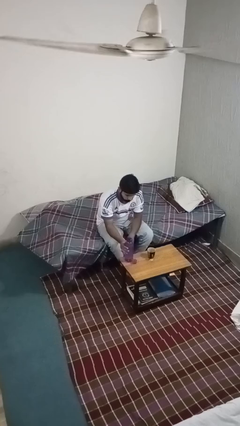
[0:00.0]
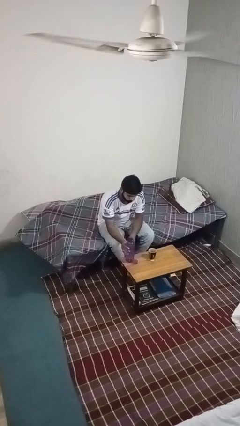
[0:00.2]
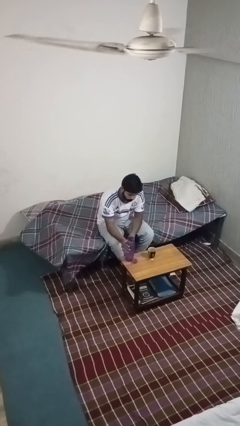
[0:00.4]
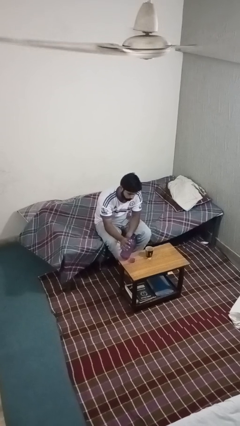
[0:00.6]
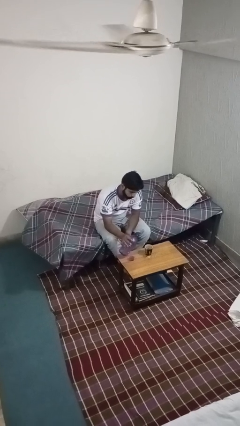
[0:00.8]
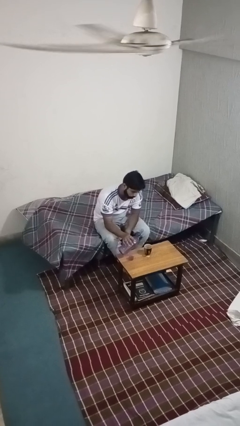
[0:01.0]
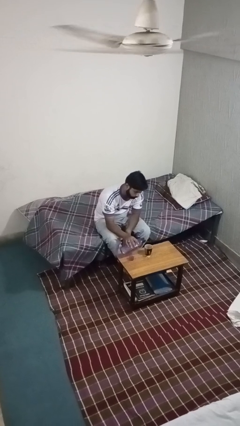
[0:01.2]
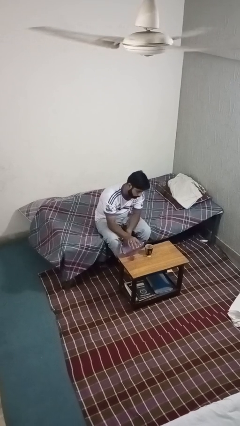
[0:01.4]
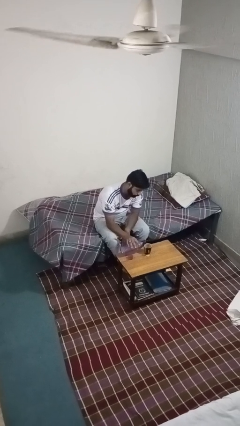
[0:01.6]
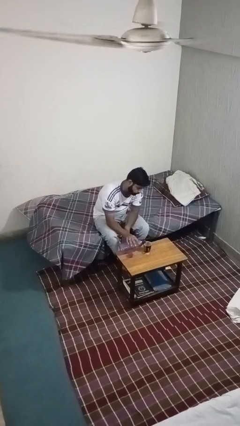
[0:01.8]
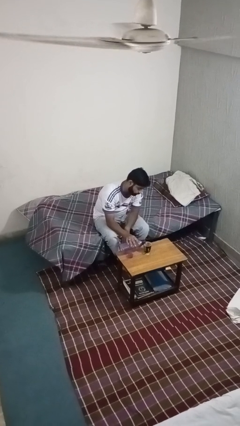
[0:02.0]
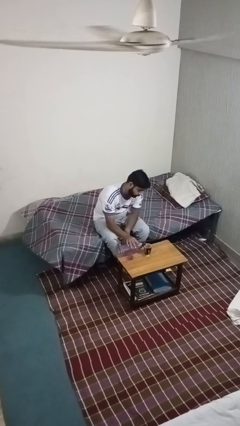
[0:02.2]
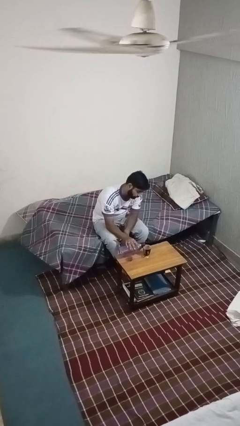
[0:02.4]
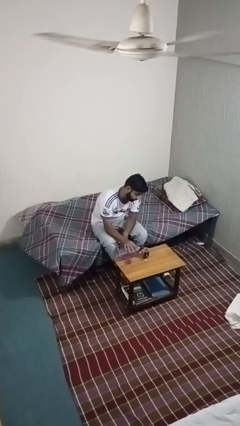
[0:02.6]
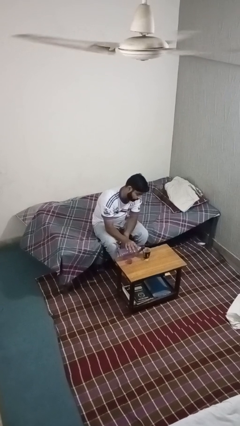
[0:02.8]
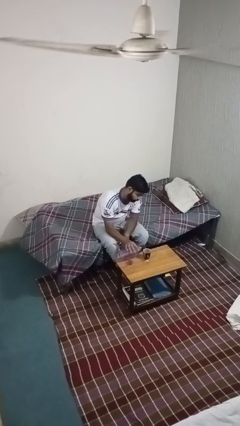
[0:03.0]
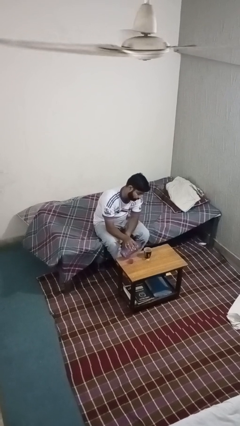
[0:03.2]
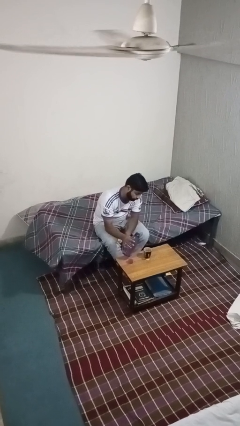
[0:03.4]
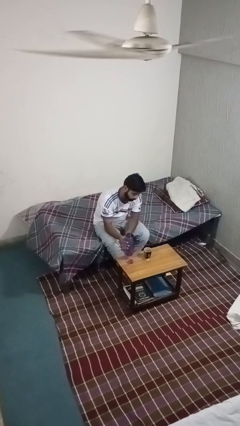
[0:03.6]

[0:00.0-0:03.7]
person pours liquid into cup

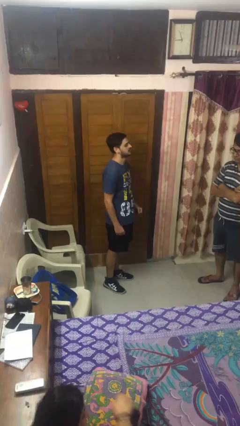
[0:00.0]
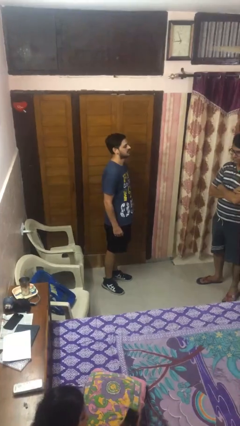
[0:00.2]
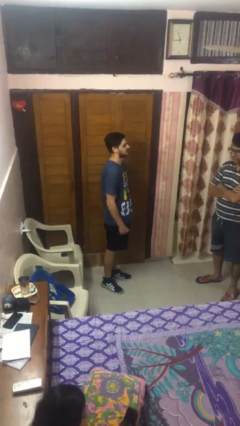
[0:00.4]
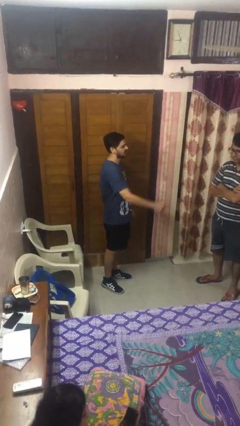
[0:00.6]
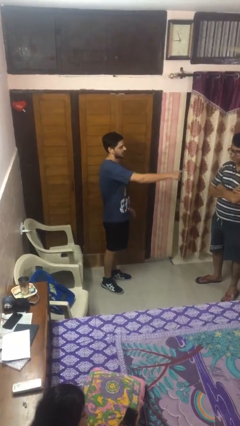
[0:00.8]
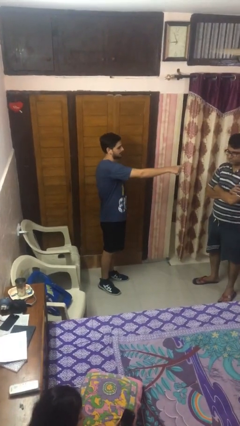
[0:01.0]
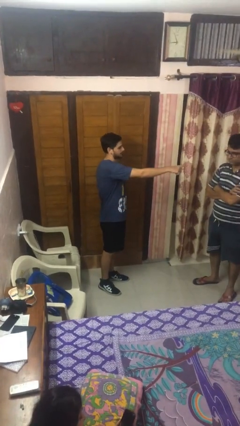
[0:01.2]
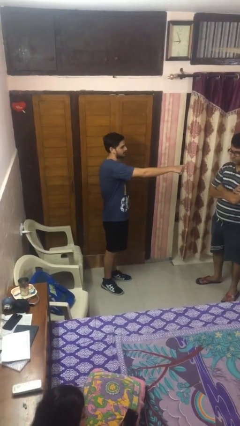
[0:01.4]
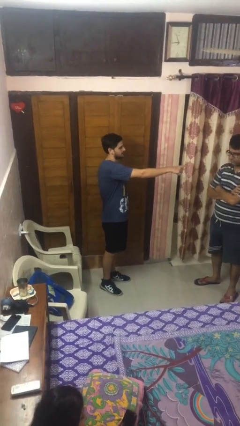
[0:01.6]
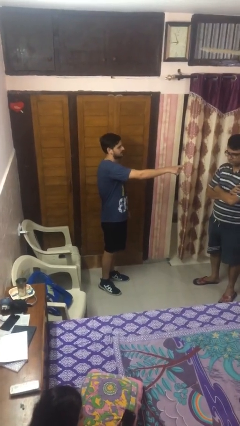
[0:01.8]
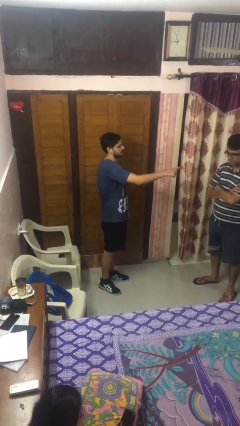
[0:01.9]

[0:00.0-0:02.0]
person points at person

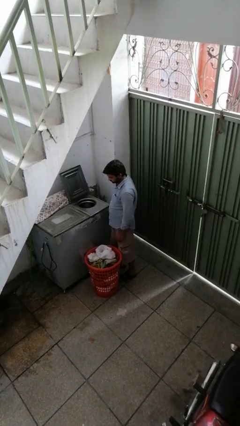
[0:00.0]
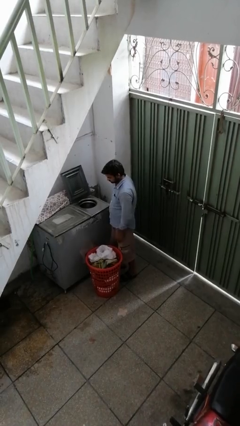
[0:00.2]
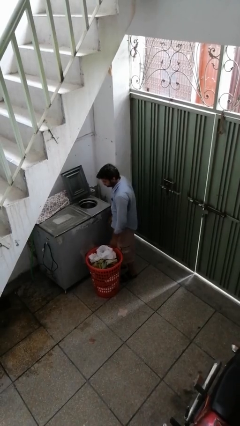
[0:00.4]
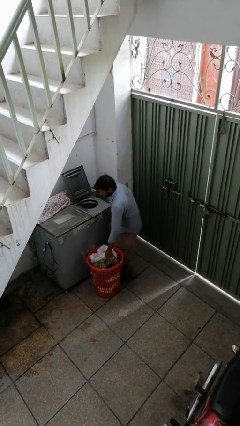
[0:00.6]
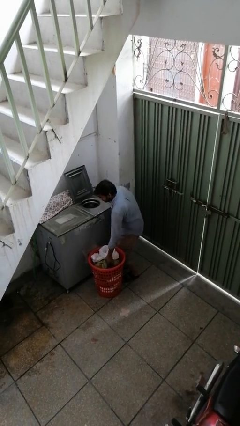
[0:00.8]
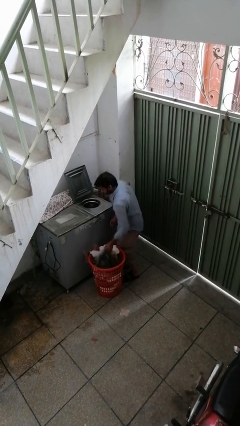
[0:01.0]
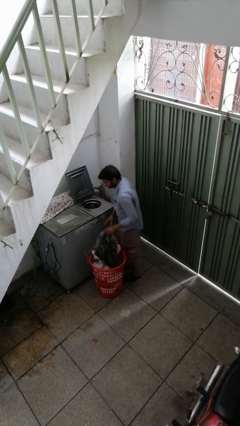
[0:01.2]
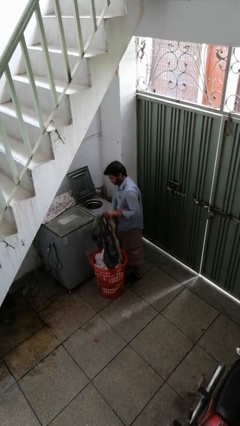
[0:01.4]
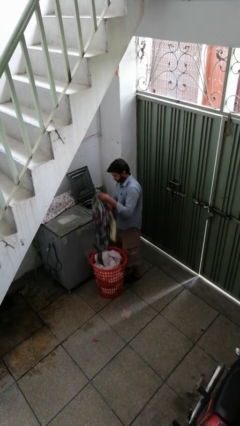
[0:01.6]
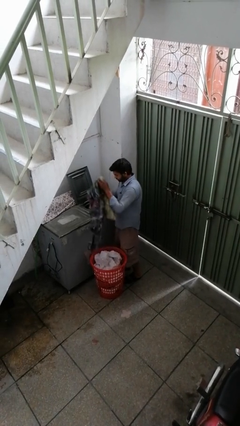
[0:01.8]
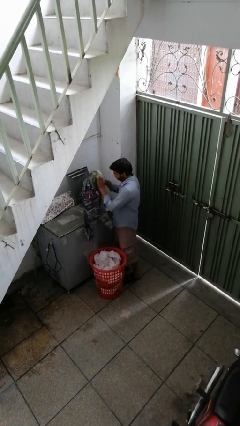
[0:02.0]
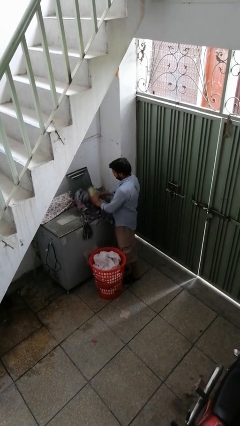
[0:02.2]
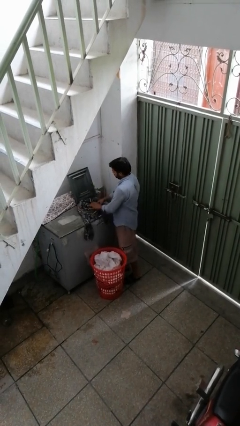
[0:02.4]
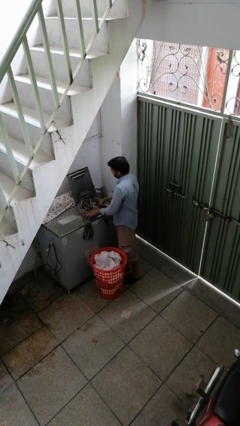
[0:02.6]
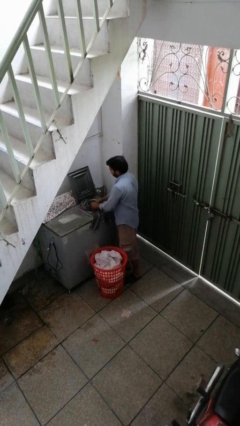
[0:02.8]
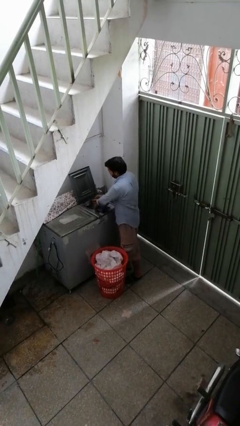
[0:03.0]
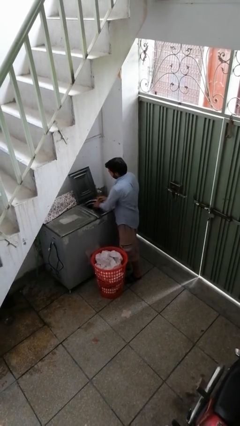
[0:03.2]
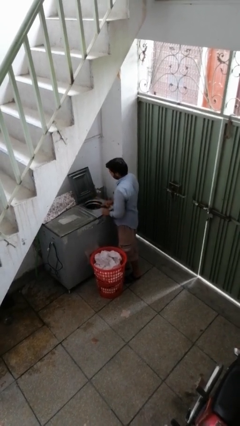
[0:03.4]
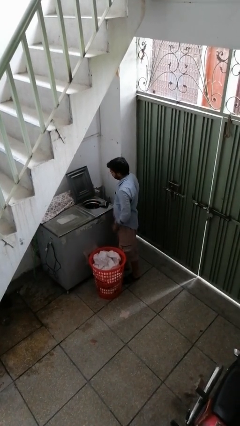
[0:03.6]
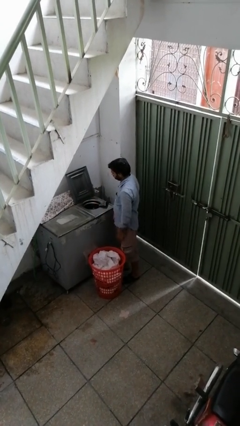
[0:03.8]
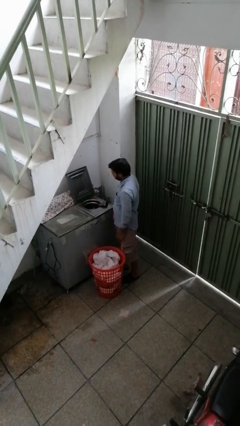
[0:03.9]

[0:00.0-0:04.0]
person loads dryer

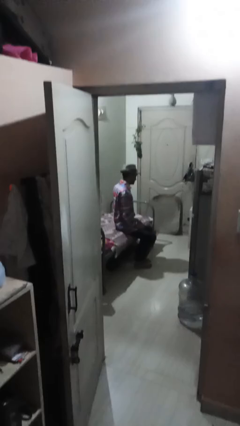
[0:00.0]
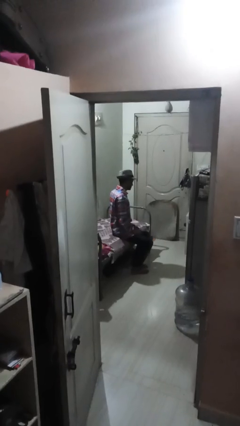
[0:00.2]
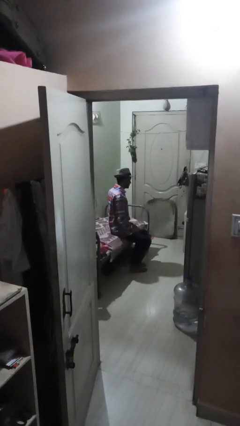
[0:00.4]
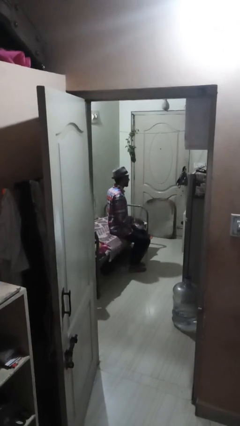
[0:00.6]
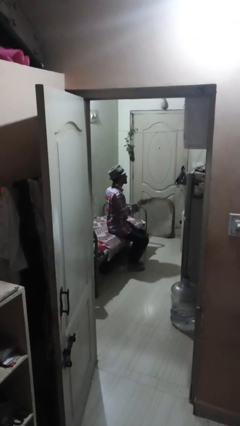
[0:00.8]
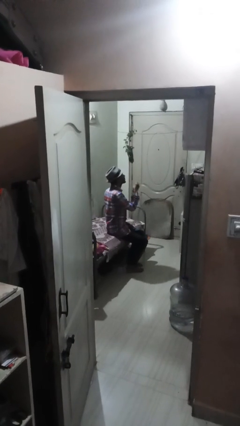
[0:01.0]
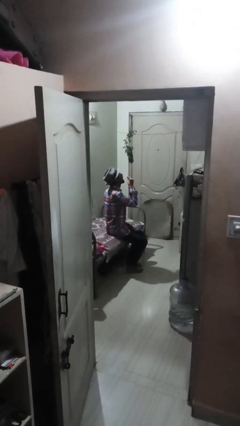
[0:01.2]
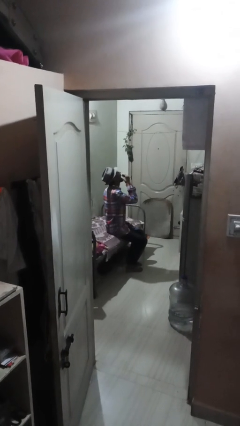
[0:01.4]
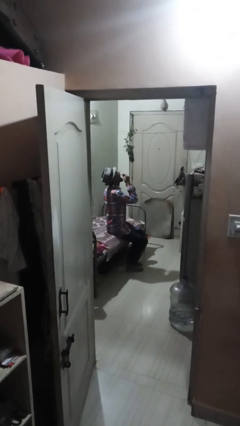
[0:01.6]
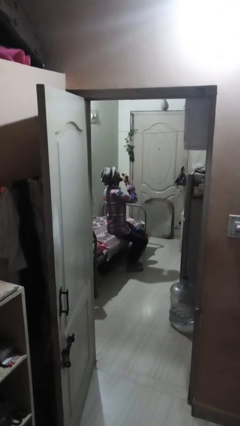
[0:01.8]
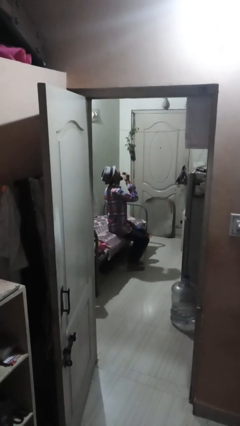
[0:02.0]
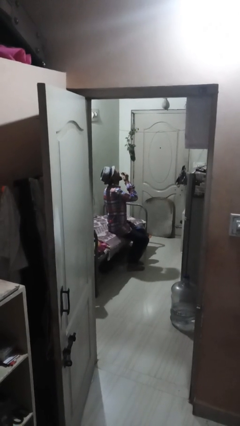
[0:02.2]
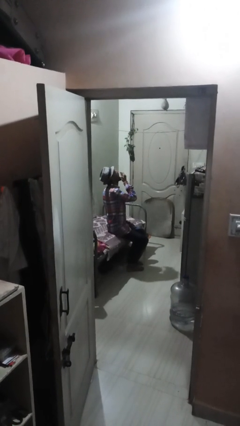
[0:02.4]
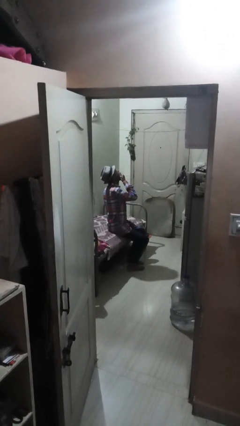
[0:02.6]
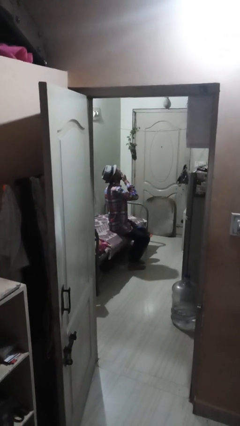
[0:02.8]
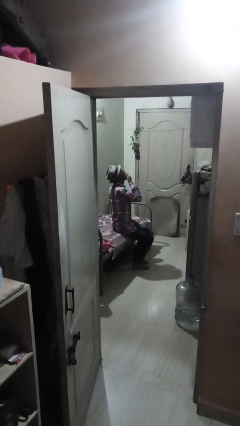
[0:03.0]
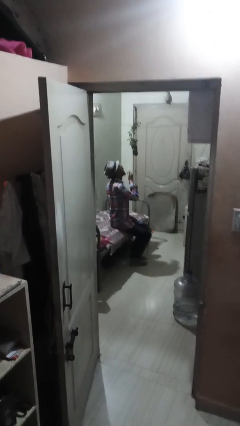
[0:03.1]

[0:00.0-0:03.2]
person yawns

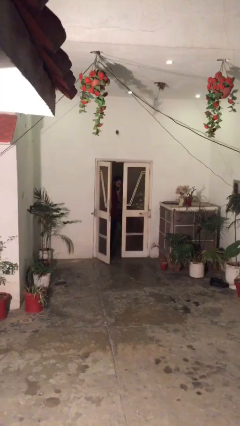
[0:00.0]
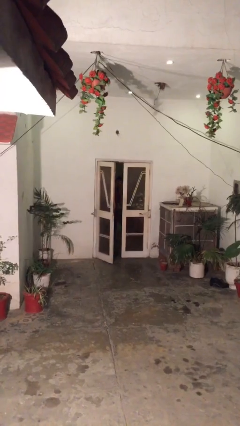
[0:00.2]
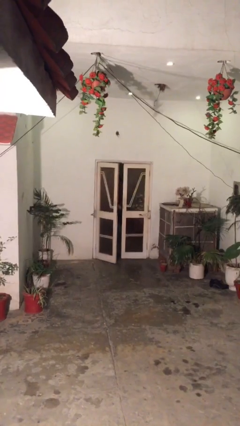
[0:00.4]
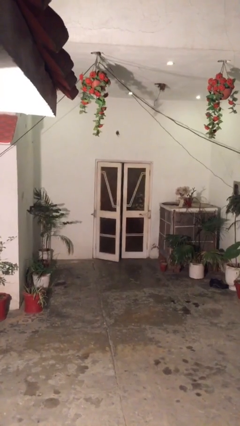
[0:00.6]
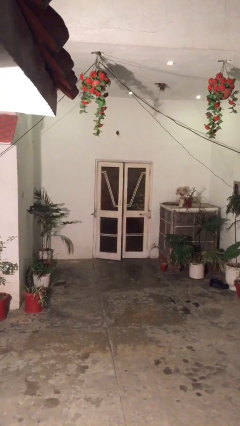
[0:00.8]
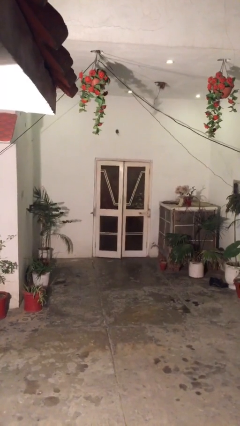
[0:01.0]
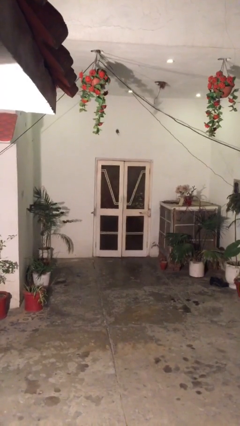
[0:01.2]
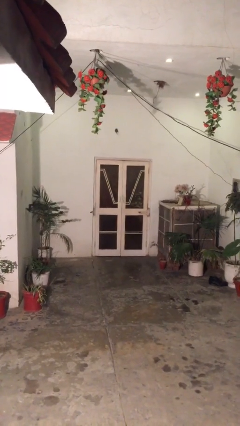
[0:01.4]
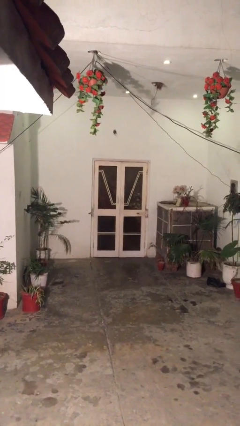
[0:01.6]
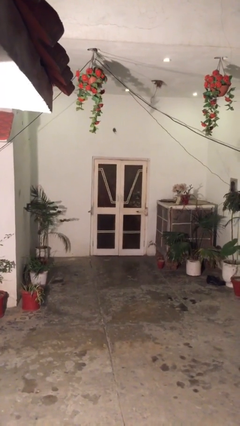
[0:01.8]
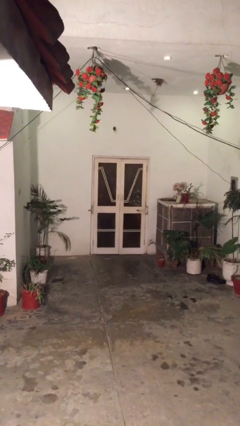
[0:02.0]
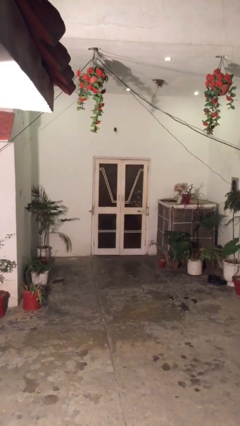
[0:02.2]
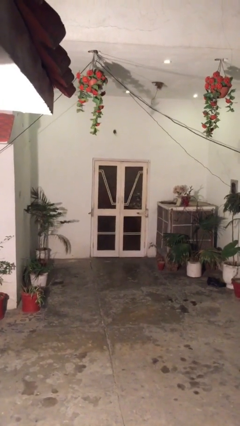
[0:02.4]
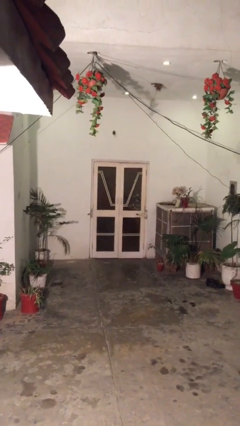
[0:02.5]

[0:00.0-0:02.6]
person closes facility door

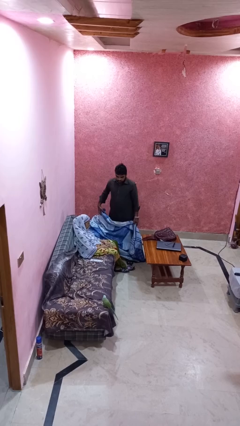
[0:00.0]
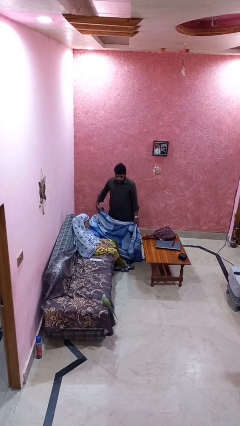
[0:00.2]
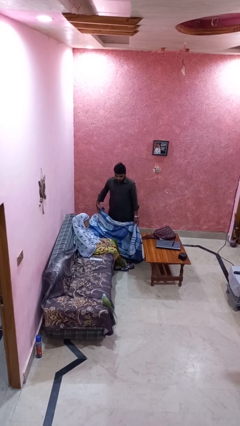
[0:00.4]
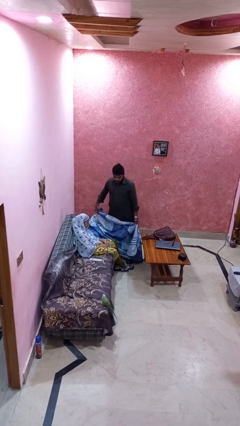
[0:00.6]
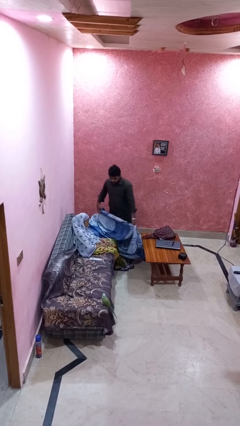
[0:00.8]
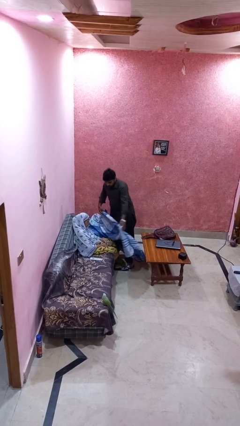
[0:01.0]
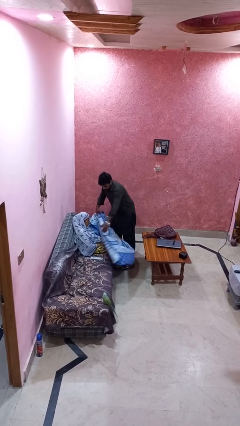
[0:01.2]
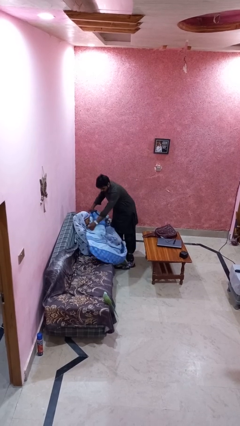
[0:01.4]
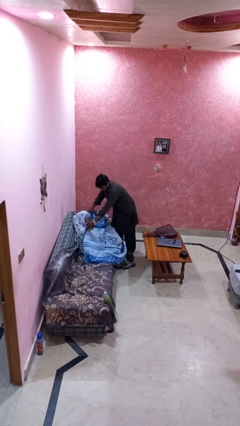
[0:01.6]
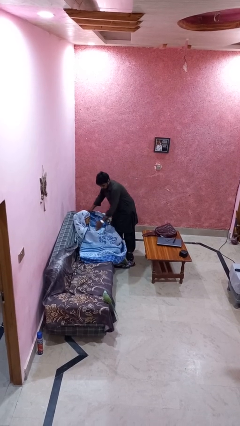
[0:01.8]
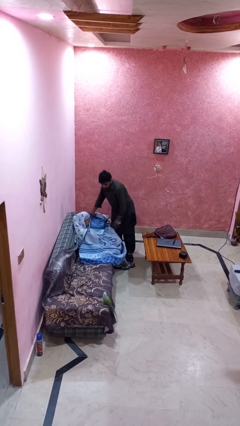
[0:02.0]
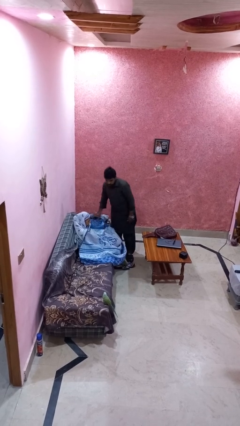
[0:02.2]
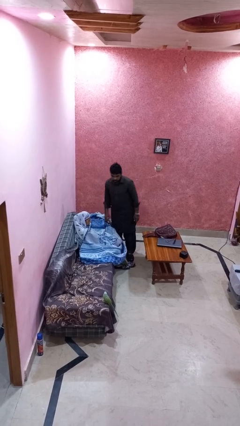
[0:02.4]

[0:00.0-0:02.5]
person covers friend with blanket
